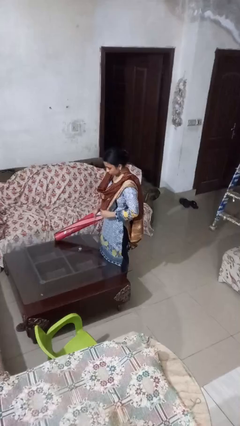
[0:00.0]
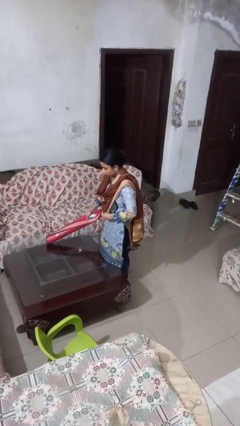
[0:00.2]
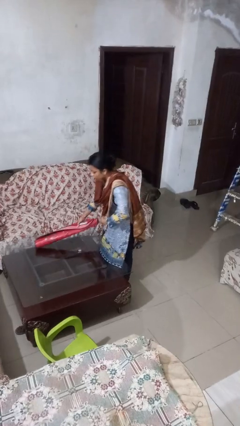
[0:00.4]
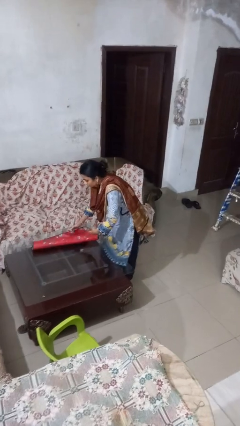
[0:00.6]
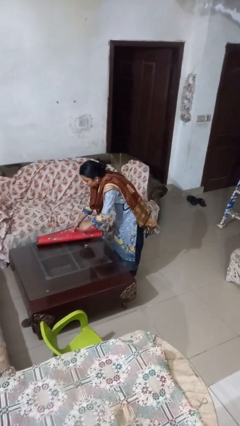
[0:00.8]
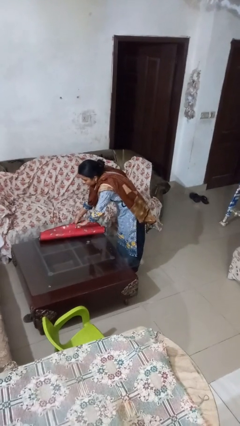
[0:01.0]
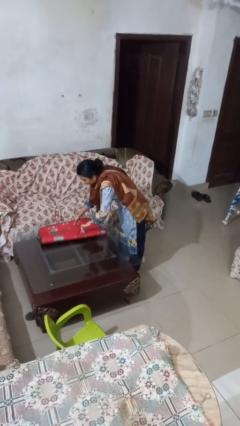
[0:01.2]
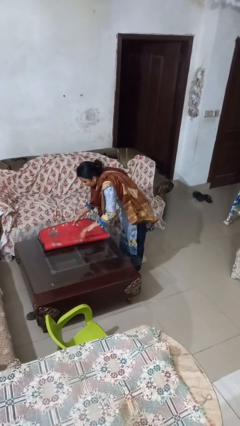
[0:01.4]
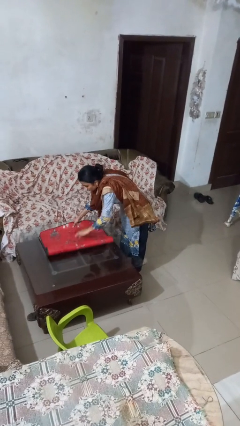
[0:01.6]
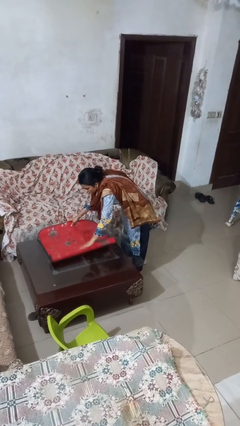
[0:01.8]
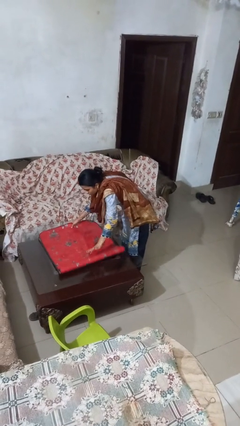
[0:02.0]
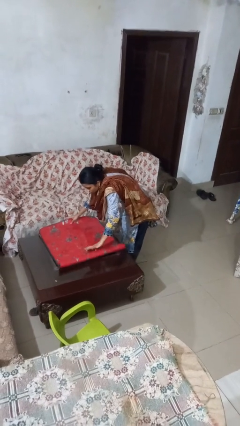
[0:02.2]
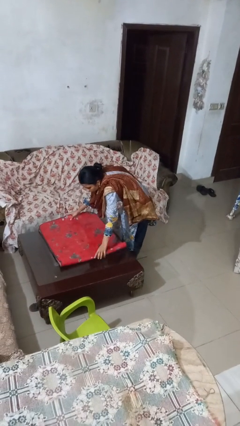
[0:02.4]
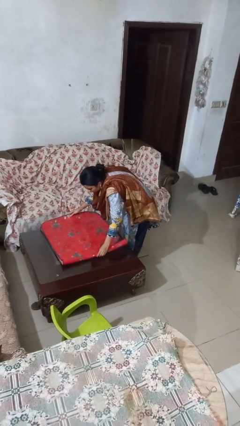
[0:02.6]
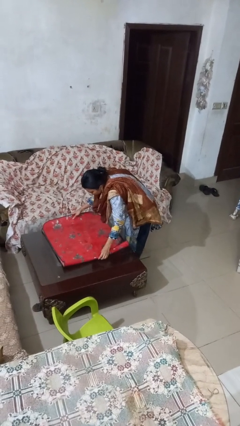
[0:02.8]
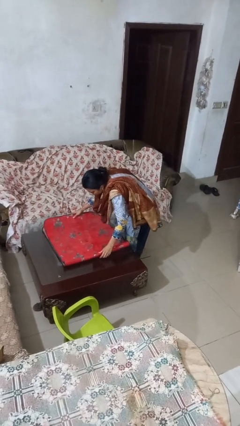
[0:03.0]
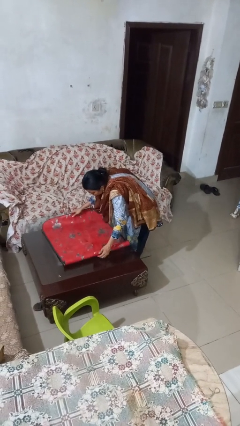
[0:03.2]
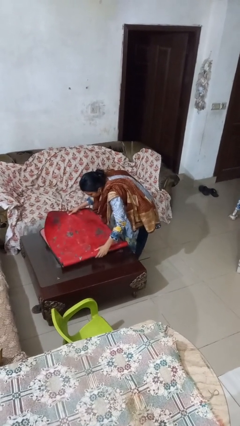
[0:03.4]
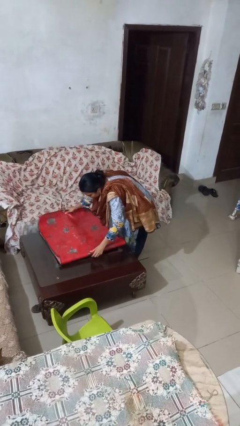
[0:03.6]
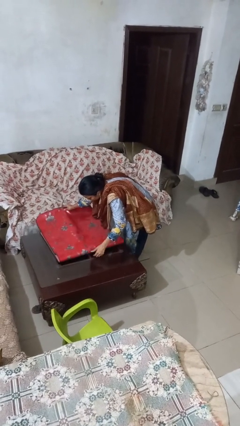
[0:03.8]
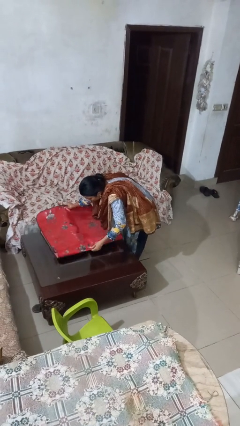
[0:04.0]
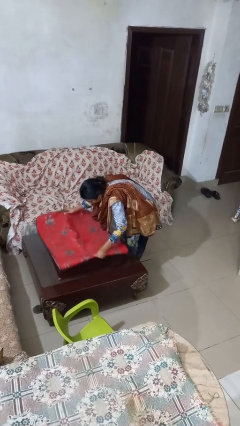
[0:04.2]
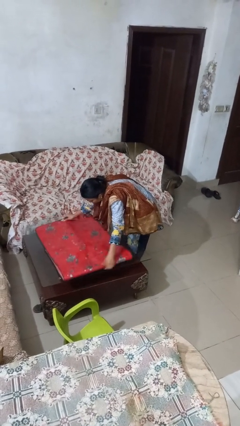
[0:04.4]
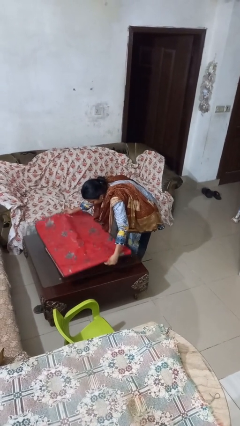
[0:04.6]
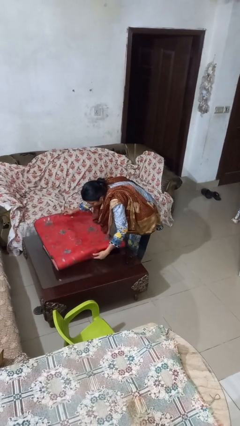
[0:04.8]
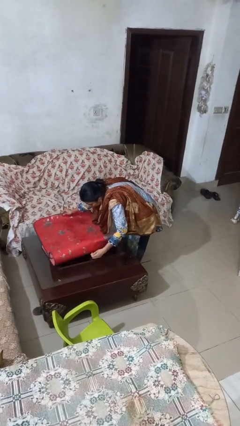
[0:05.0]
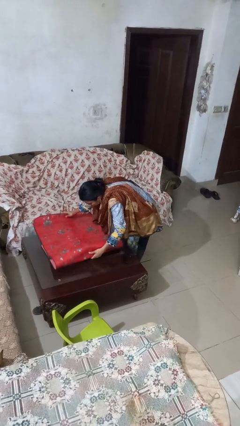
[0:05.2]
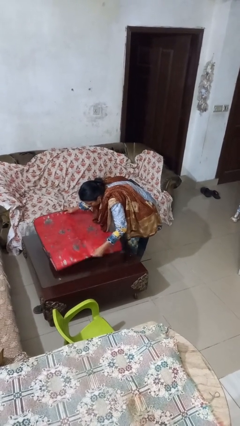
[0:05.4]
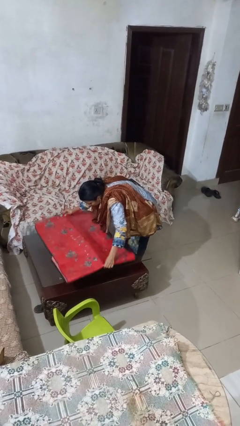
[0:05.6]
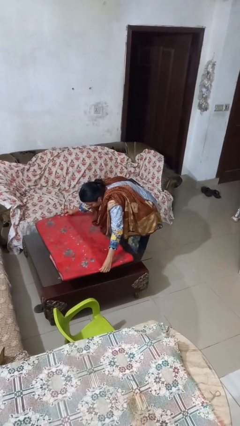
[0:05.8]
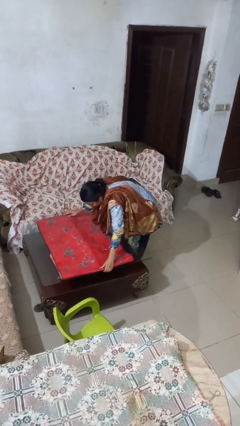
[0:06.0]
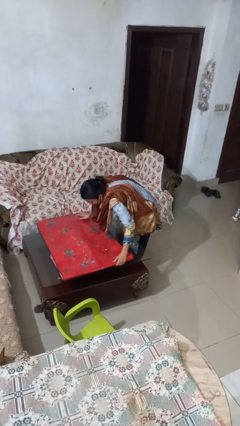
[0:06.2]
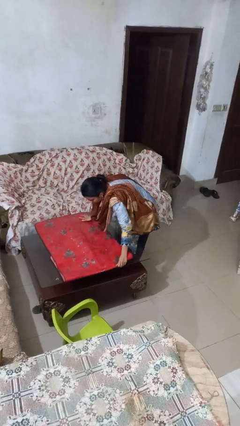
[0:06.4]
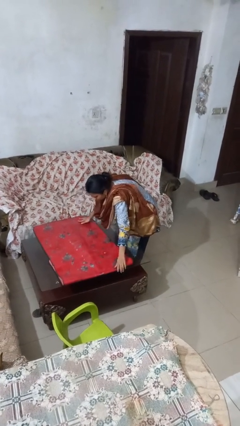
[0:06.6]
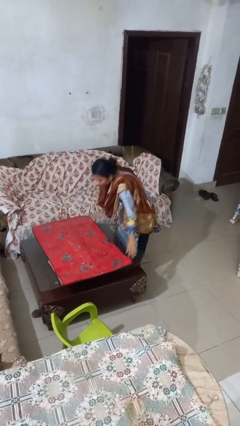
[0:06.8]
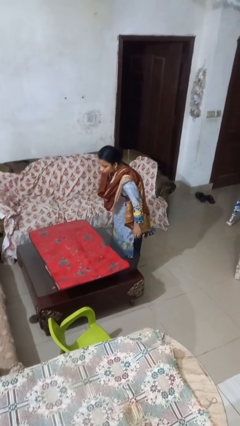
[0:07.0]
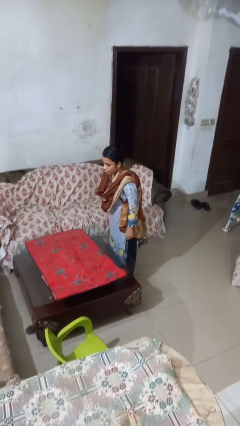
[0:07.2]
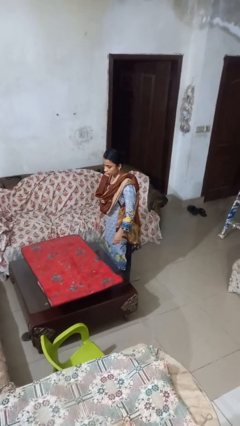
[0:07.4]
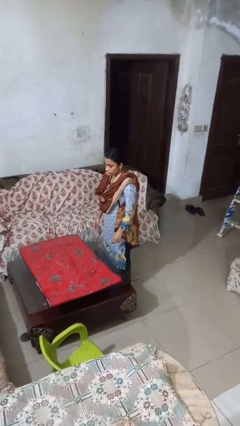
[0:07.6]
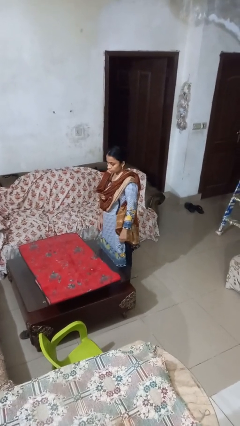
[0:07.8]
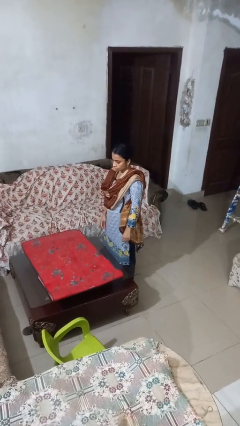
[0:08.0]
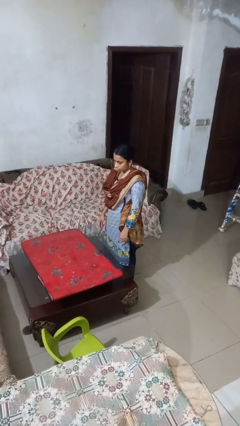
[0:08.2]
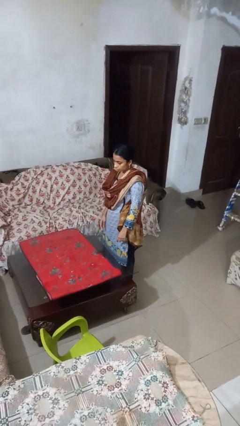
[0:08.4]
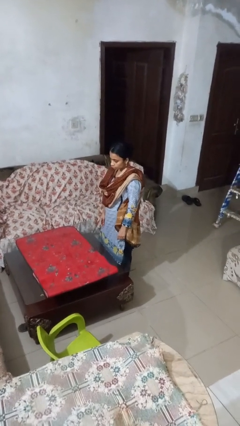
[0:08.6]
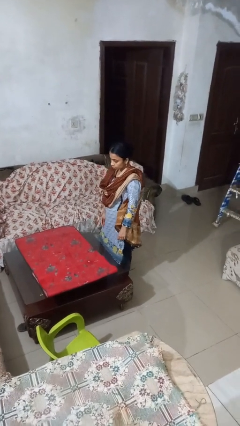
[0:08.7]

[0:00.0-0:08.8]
person spreads tablecloth

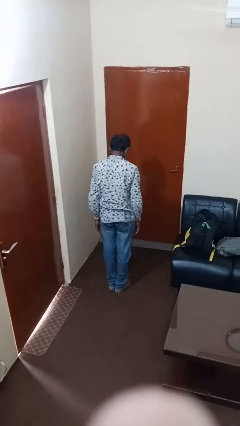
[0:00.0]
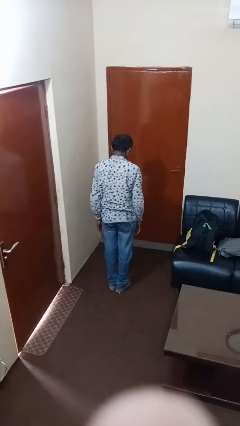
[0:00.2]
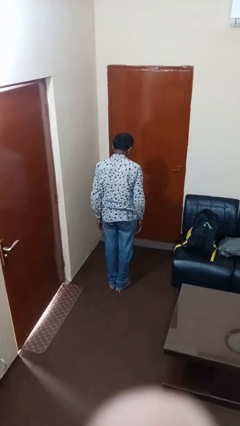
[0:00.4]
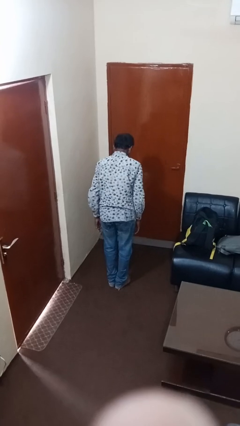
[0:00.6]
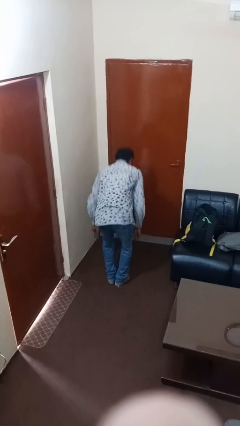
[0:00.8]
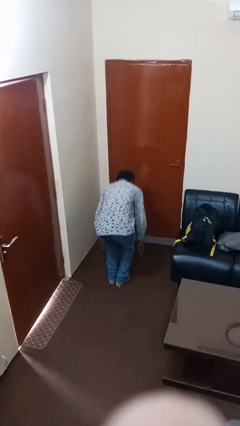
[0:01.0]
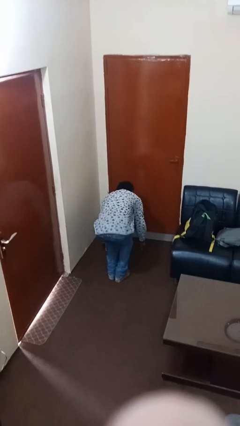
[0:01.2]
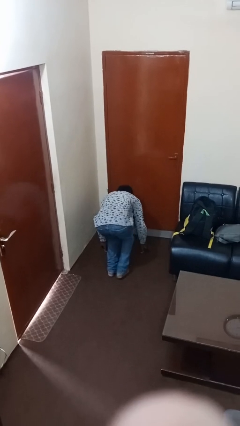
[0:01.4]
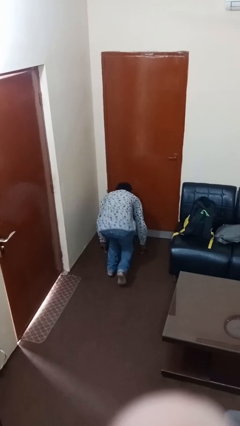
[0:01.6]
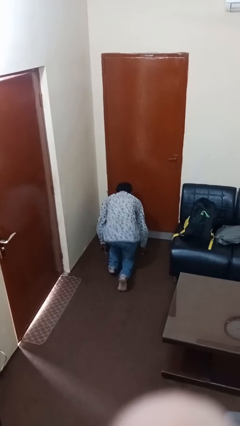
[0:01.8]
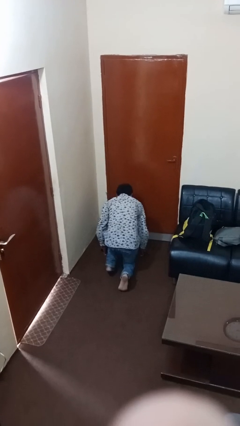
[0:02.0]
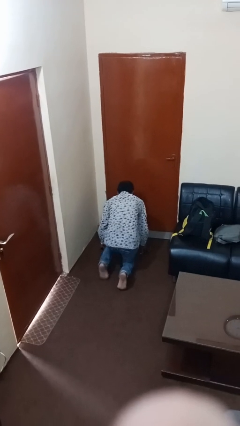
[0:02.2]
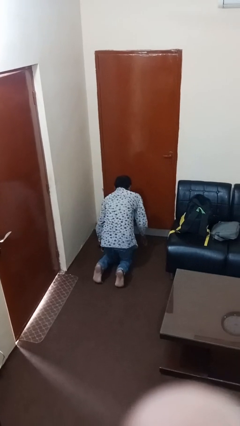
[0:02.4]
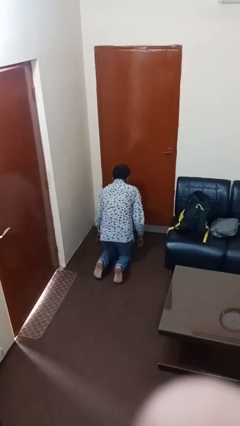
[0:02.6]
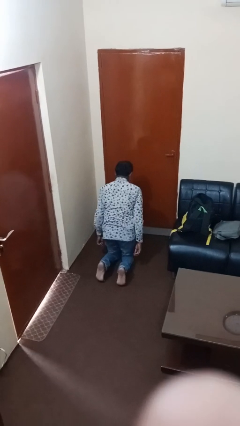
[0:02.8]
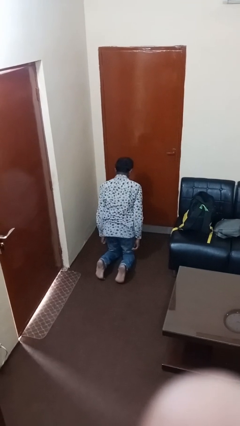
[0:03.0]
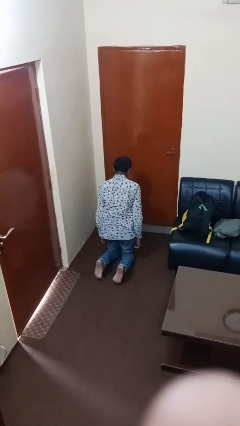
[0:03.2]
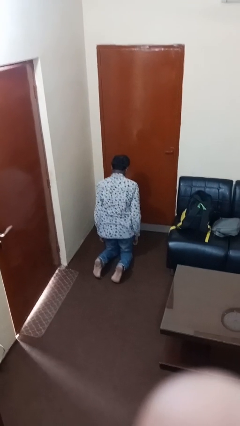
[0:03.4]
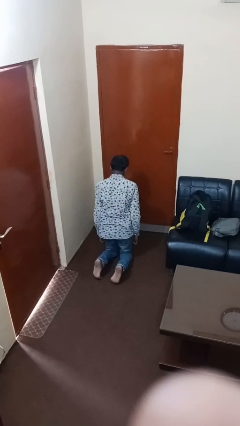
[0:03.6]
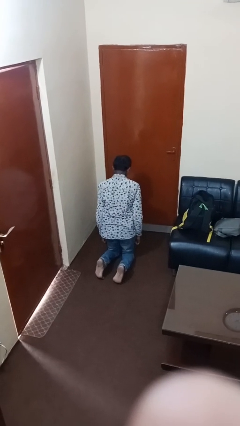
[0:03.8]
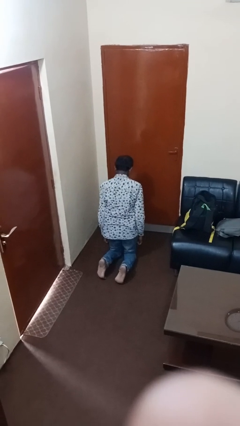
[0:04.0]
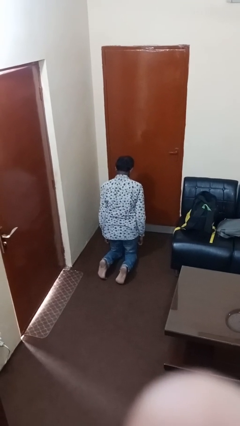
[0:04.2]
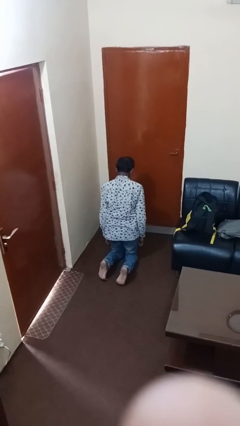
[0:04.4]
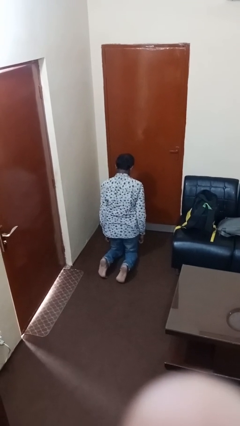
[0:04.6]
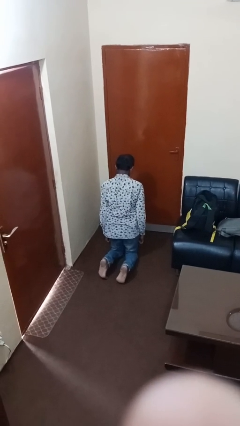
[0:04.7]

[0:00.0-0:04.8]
person kneels

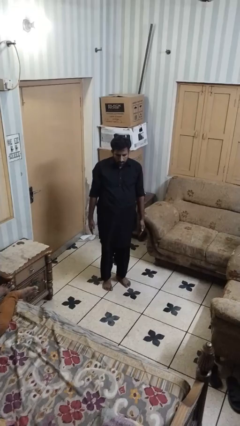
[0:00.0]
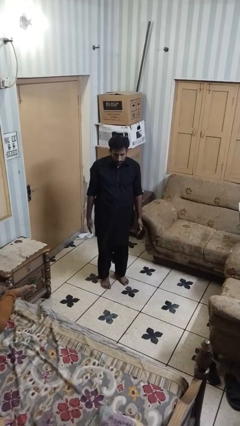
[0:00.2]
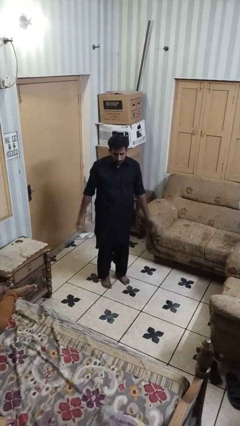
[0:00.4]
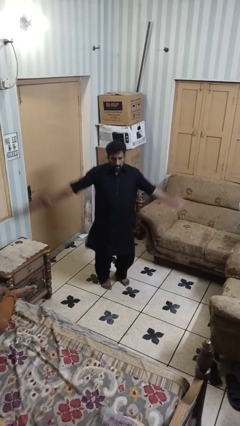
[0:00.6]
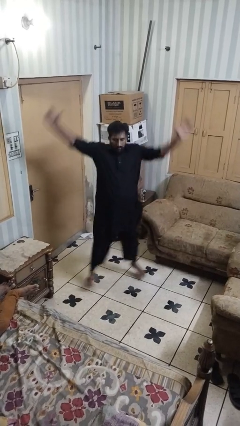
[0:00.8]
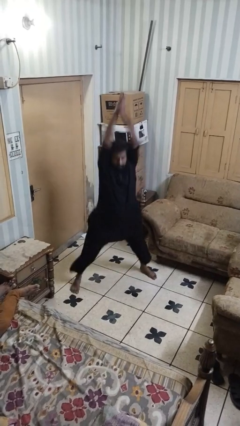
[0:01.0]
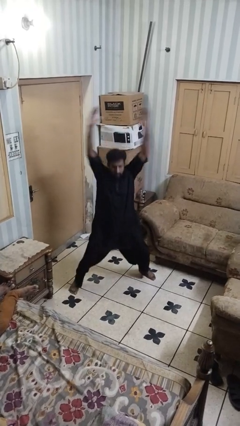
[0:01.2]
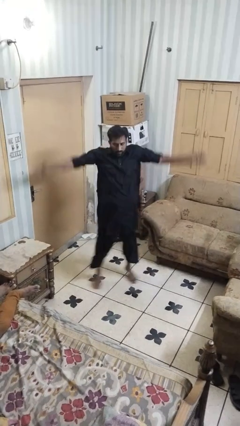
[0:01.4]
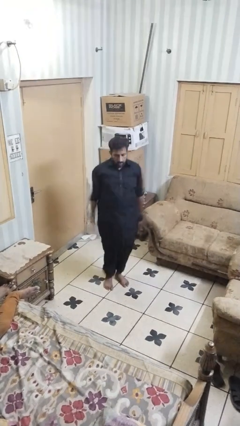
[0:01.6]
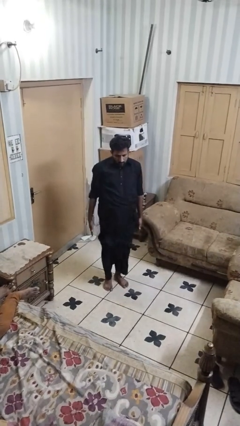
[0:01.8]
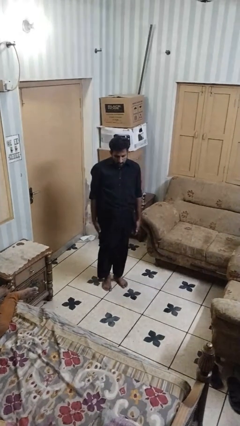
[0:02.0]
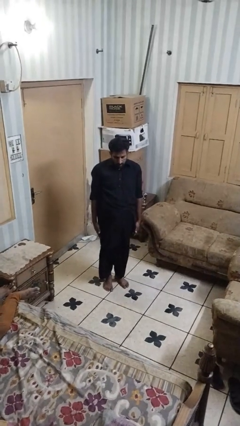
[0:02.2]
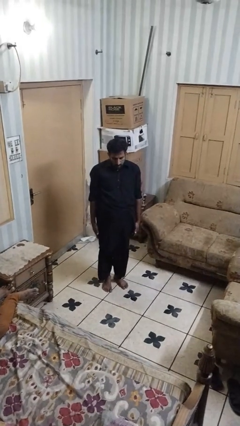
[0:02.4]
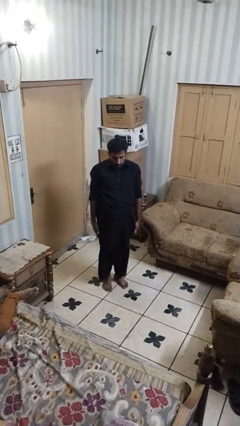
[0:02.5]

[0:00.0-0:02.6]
person exercises with jumping jacks

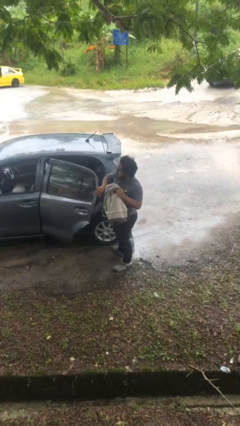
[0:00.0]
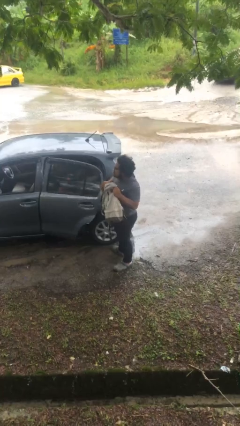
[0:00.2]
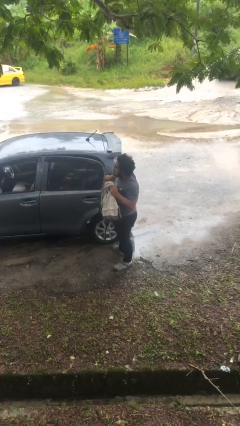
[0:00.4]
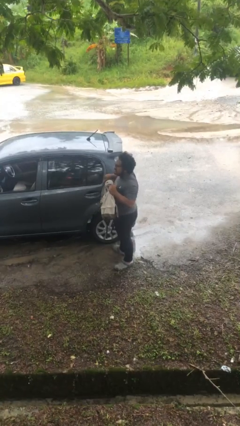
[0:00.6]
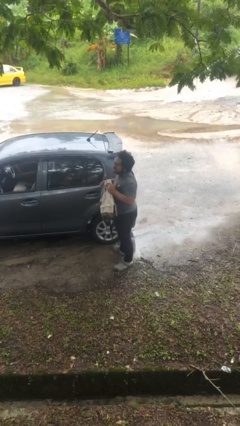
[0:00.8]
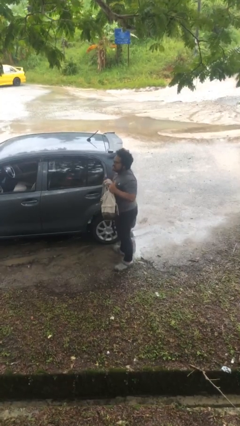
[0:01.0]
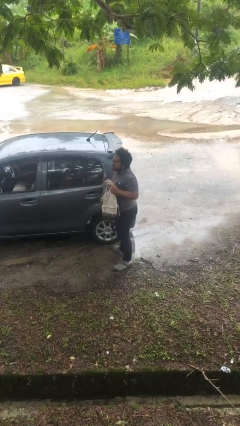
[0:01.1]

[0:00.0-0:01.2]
person closes car door
